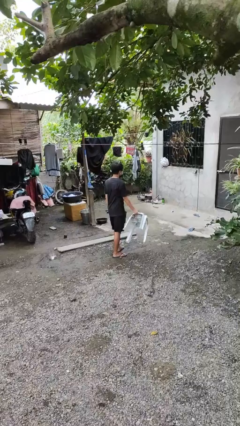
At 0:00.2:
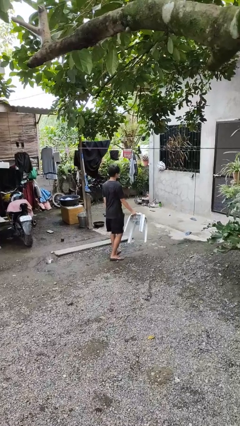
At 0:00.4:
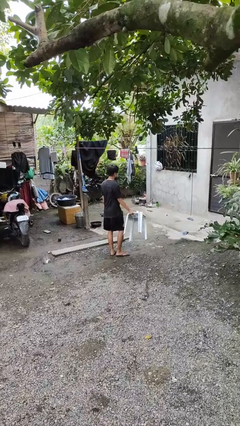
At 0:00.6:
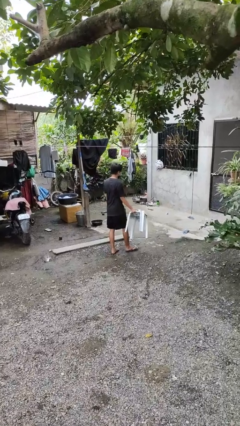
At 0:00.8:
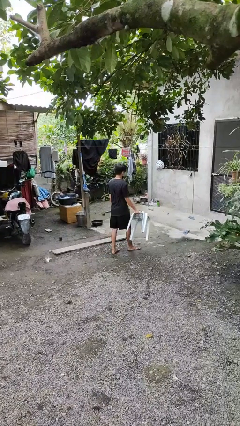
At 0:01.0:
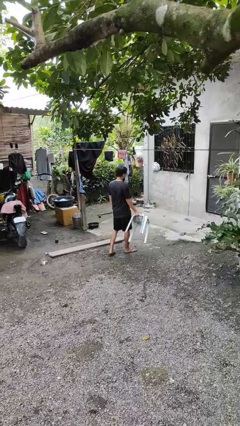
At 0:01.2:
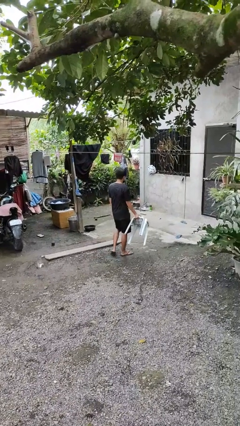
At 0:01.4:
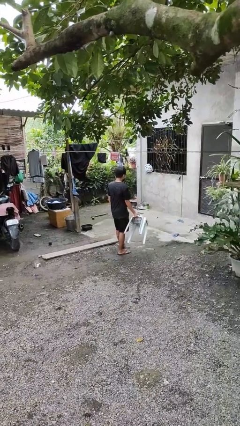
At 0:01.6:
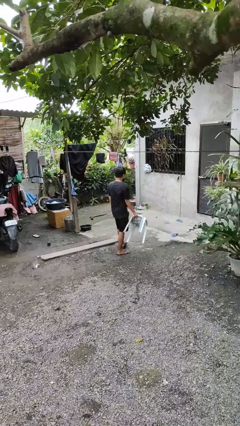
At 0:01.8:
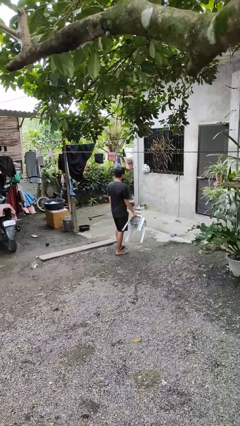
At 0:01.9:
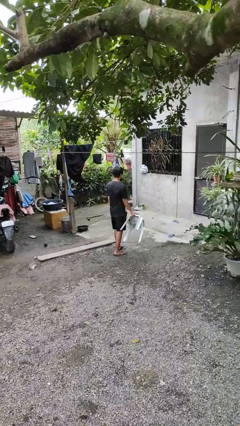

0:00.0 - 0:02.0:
person carries furniture

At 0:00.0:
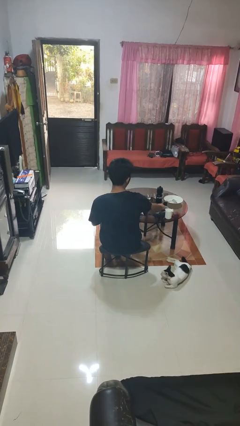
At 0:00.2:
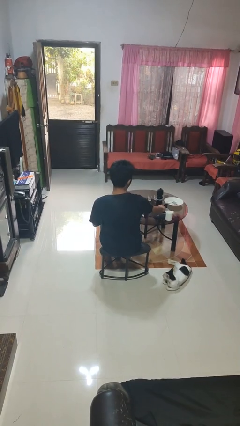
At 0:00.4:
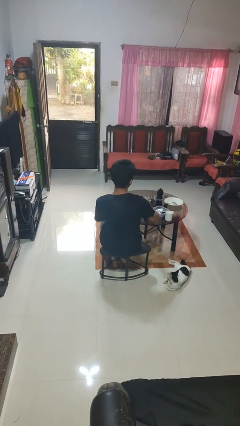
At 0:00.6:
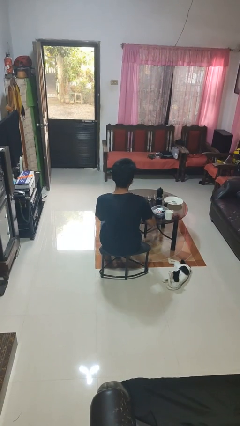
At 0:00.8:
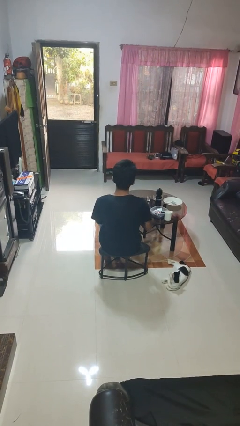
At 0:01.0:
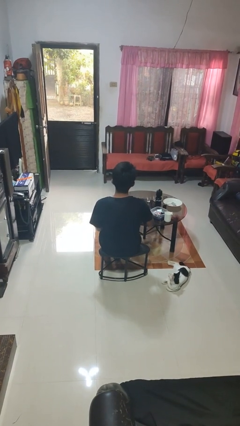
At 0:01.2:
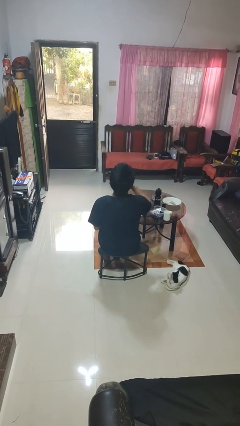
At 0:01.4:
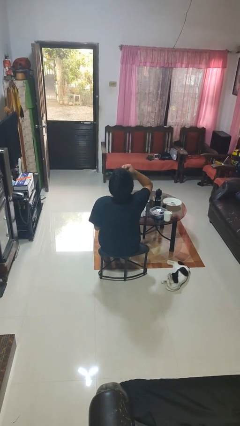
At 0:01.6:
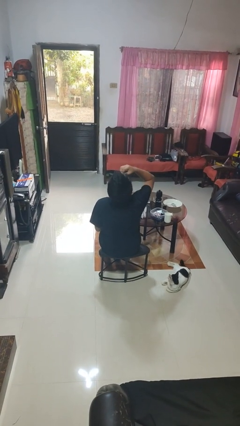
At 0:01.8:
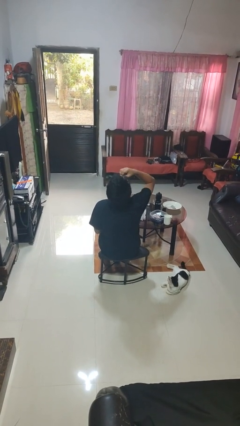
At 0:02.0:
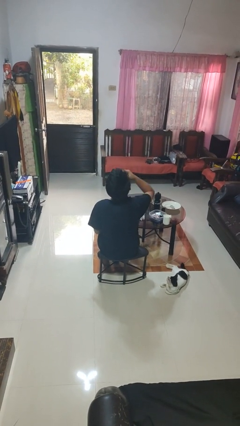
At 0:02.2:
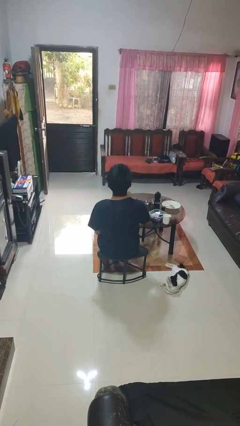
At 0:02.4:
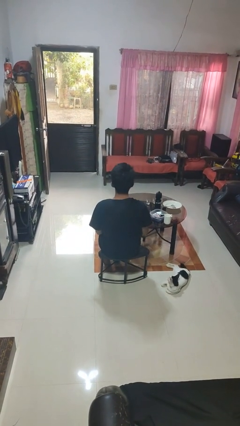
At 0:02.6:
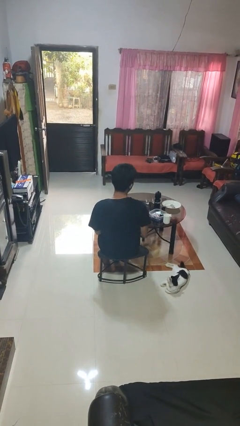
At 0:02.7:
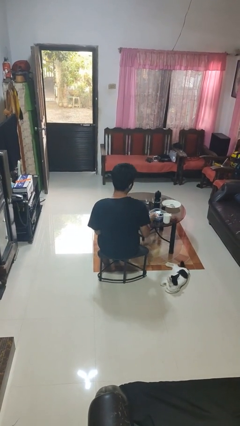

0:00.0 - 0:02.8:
person takes medicine pills

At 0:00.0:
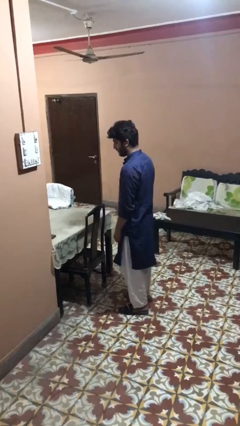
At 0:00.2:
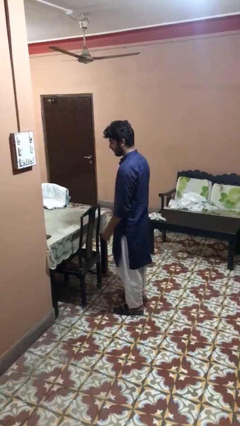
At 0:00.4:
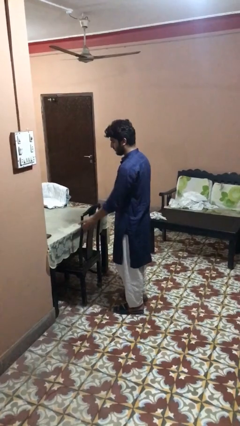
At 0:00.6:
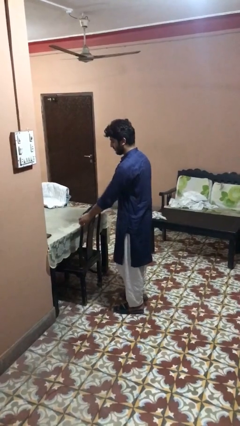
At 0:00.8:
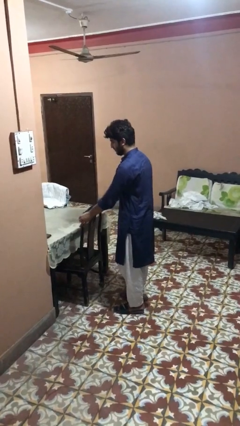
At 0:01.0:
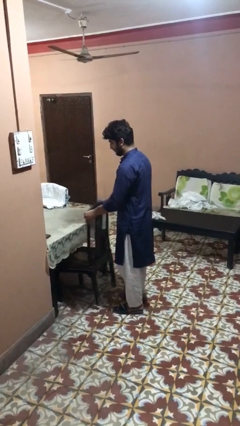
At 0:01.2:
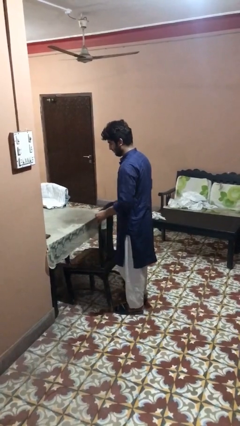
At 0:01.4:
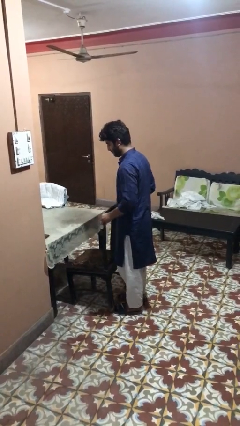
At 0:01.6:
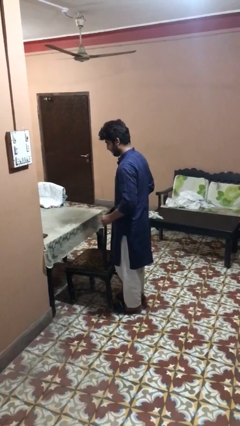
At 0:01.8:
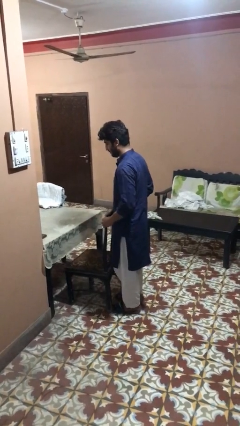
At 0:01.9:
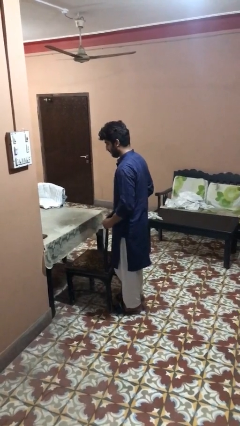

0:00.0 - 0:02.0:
person pulls out chair

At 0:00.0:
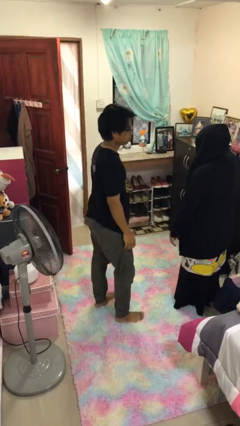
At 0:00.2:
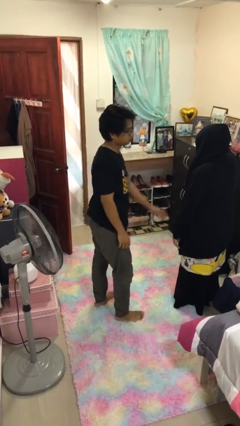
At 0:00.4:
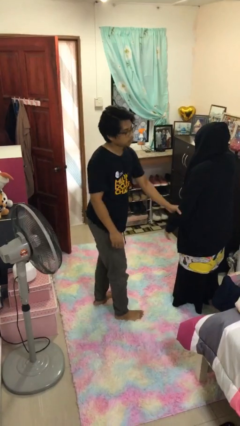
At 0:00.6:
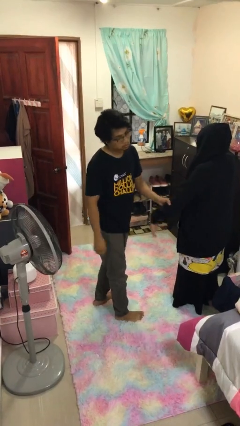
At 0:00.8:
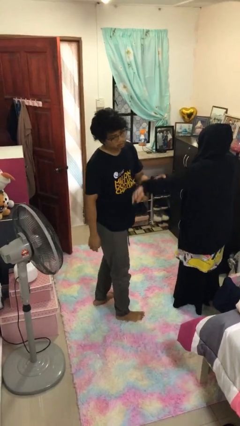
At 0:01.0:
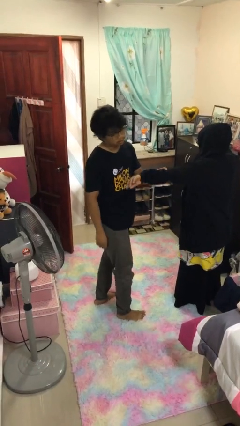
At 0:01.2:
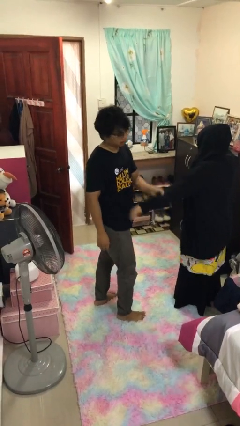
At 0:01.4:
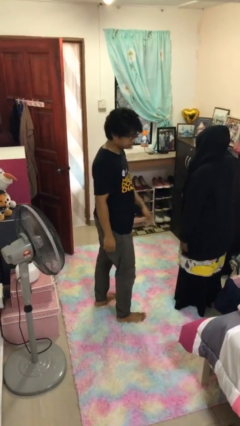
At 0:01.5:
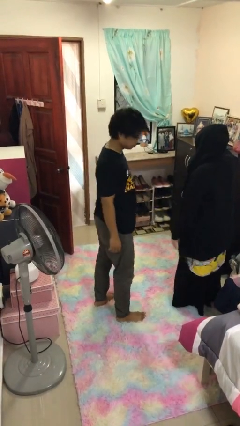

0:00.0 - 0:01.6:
person grabs person by forearm

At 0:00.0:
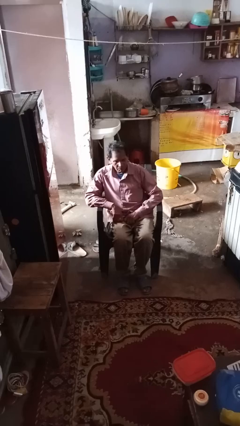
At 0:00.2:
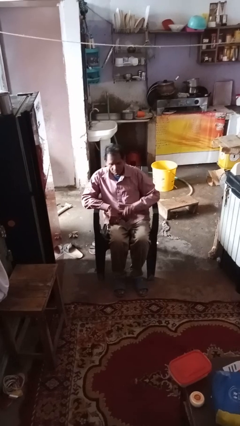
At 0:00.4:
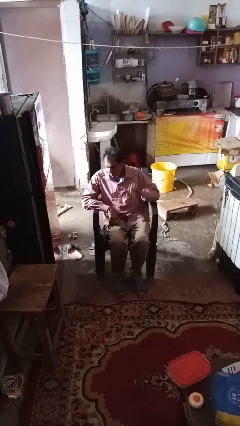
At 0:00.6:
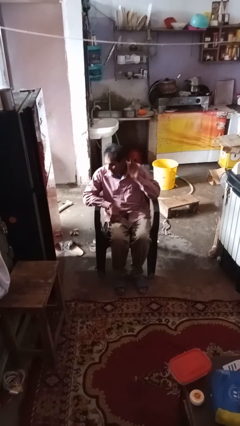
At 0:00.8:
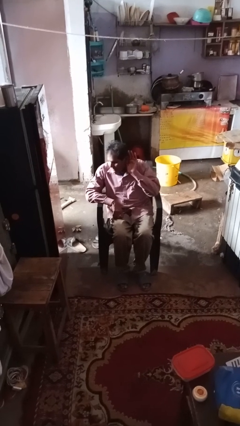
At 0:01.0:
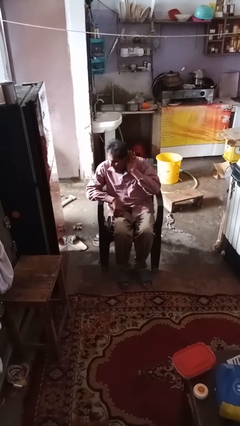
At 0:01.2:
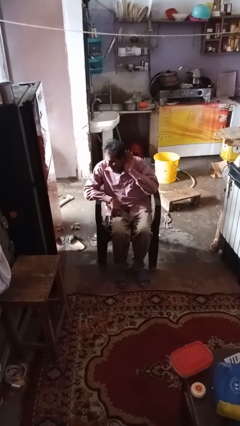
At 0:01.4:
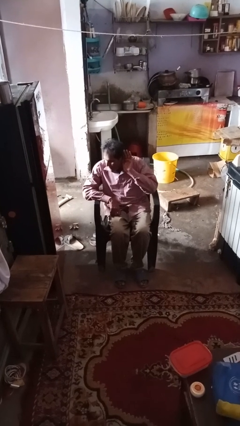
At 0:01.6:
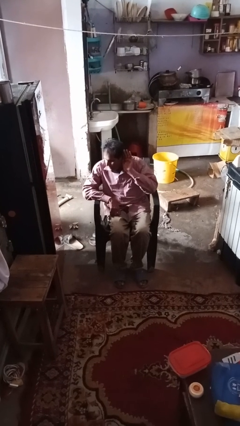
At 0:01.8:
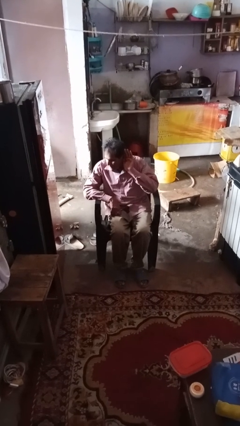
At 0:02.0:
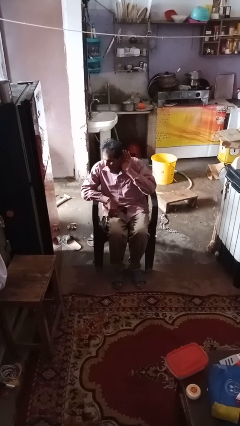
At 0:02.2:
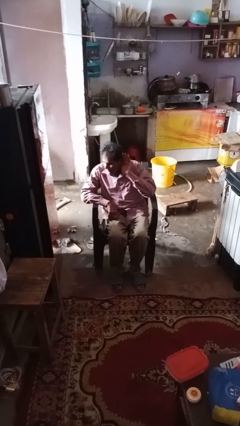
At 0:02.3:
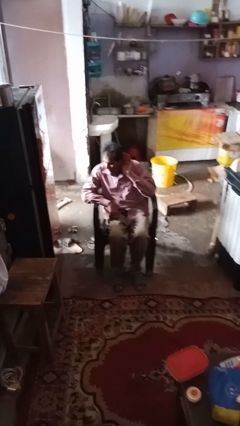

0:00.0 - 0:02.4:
person gestures listen closely

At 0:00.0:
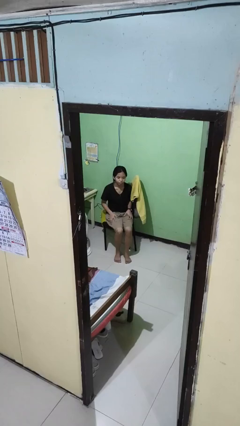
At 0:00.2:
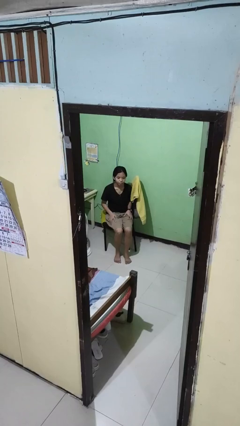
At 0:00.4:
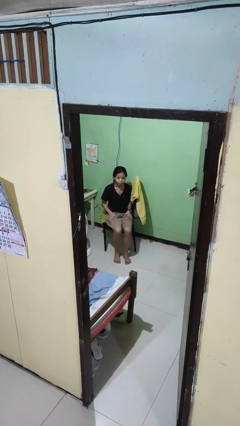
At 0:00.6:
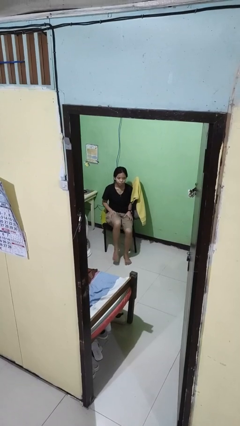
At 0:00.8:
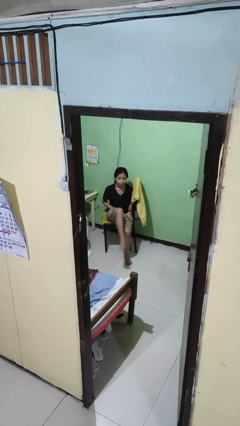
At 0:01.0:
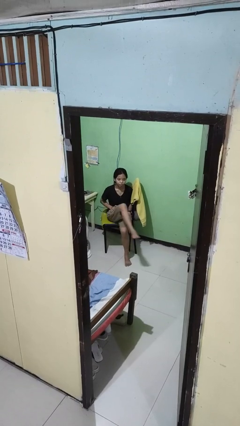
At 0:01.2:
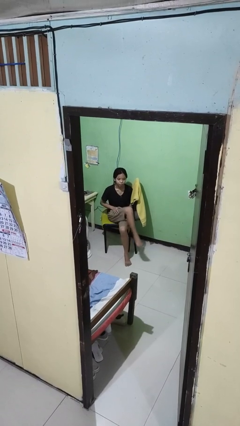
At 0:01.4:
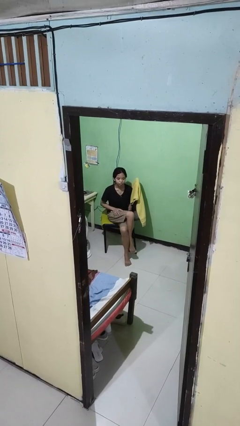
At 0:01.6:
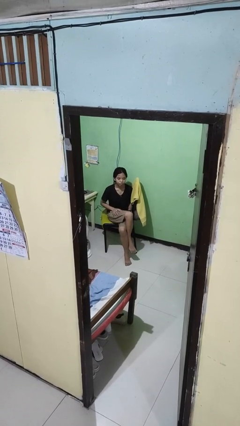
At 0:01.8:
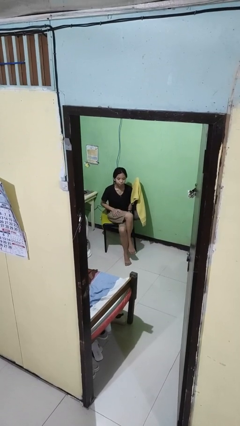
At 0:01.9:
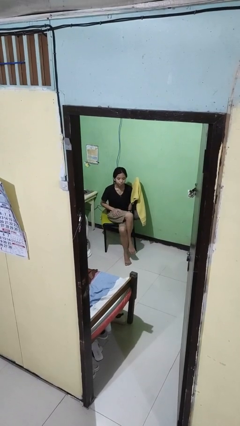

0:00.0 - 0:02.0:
person crosses legs

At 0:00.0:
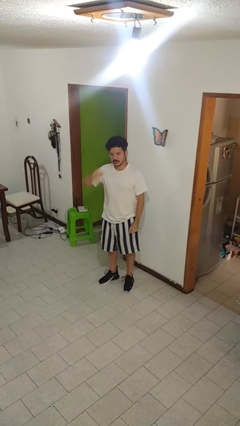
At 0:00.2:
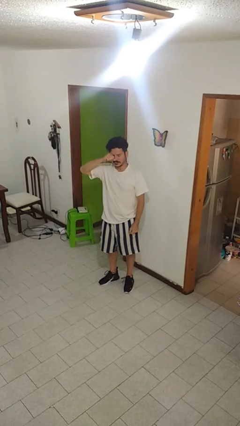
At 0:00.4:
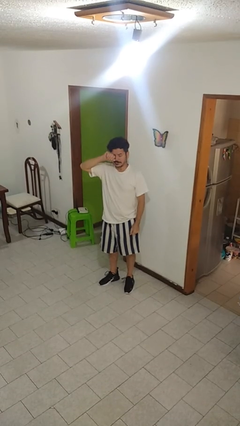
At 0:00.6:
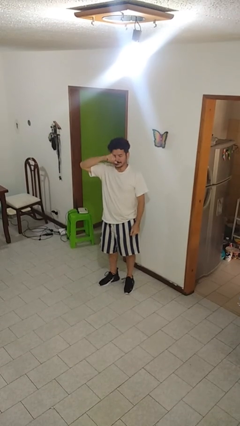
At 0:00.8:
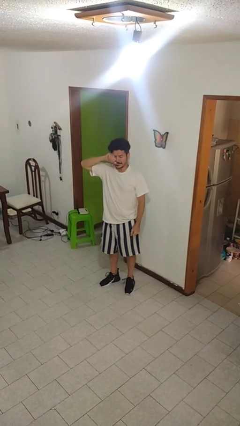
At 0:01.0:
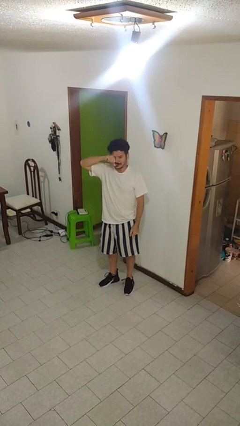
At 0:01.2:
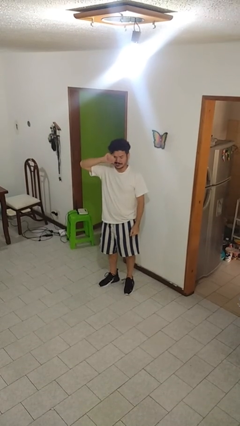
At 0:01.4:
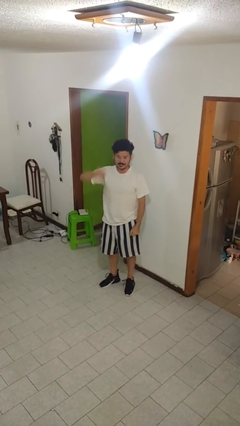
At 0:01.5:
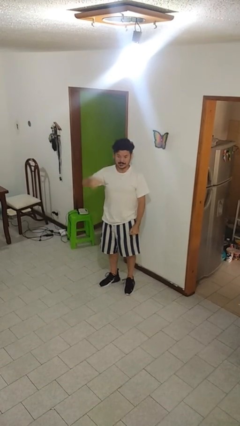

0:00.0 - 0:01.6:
person rubs eyes

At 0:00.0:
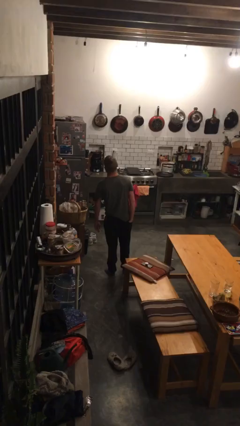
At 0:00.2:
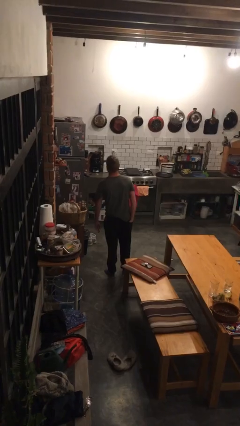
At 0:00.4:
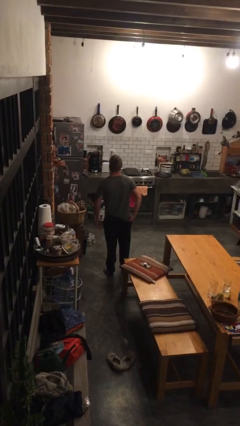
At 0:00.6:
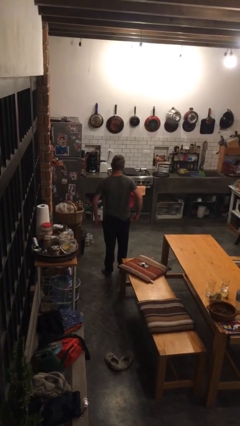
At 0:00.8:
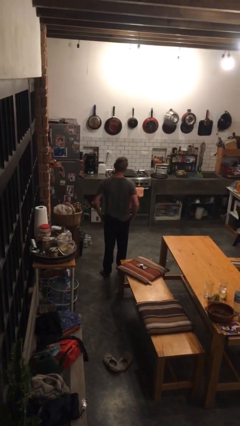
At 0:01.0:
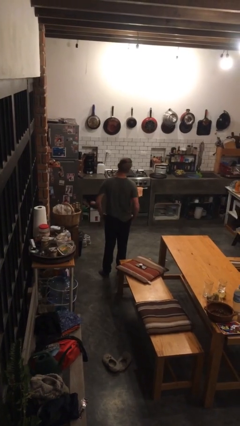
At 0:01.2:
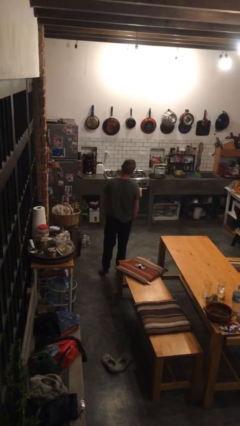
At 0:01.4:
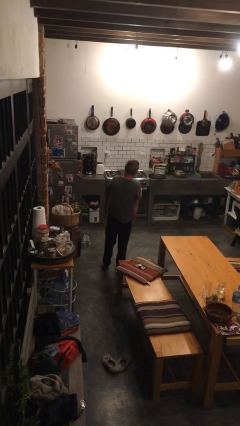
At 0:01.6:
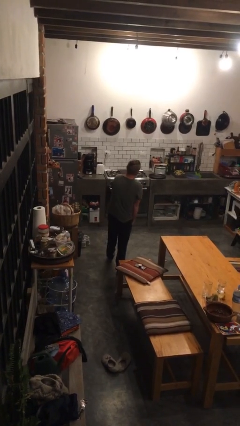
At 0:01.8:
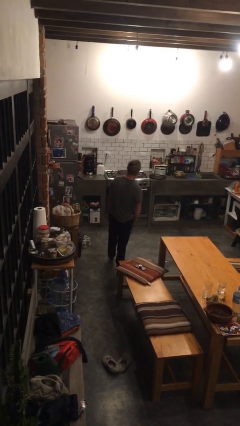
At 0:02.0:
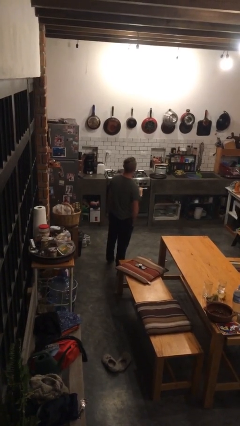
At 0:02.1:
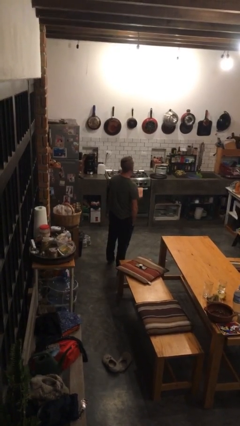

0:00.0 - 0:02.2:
person puts hands in back pockets

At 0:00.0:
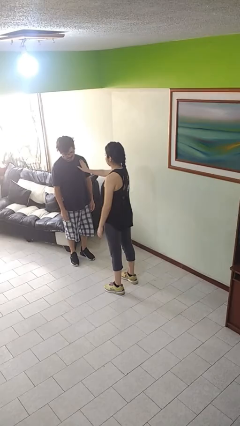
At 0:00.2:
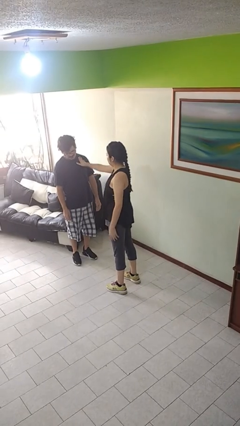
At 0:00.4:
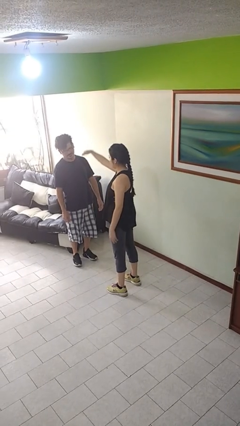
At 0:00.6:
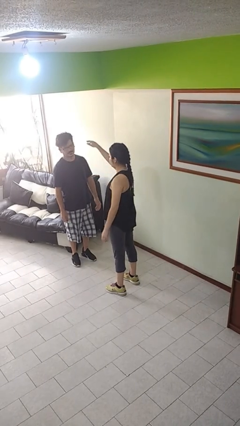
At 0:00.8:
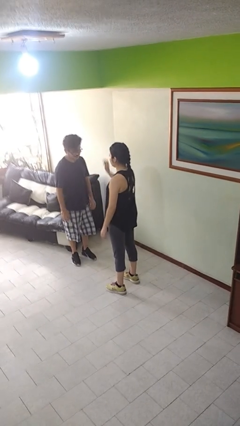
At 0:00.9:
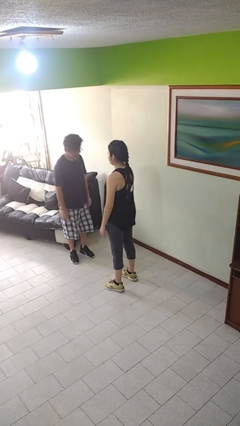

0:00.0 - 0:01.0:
person shoves person
